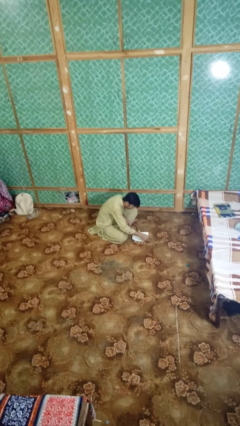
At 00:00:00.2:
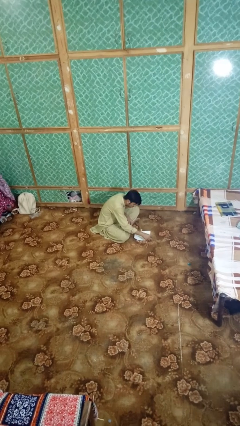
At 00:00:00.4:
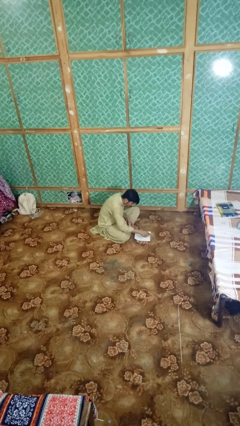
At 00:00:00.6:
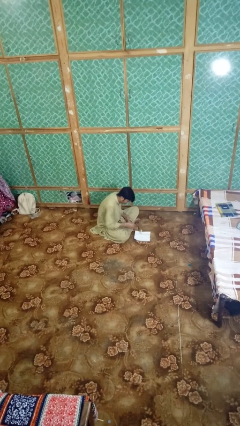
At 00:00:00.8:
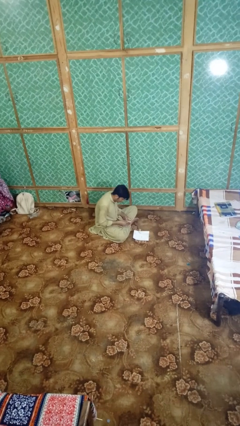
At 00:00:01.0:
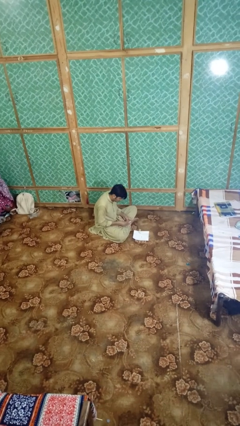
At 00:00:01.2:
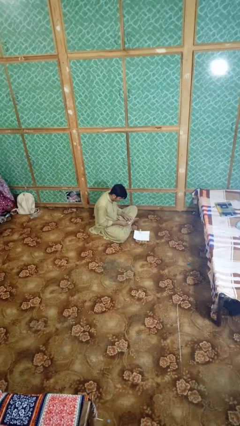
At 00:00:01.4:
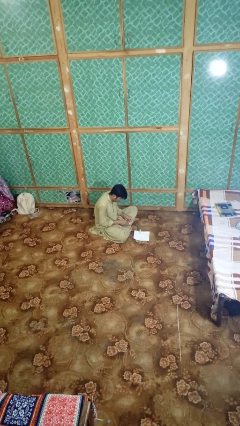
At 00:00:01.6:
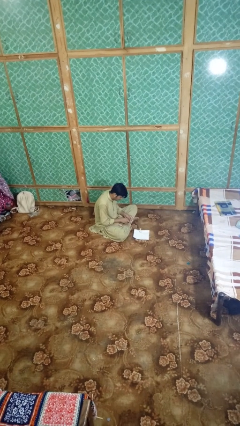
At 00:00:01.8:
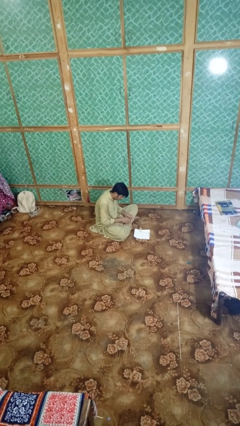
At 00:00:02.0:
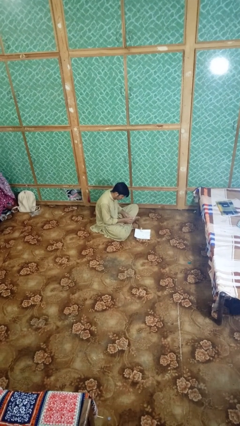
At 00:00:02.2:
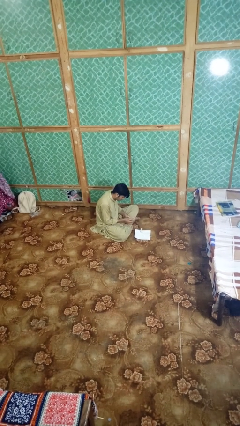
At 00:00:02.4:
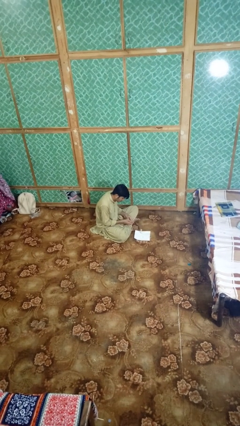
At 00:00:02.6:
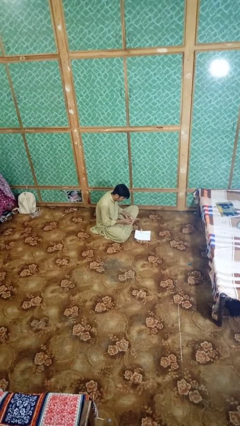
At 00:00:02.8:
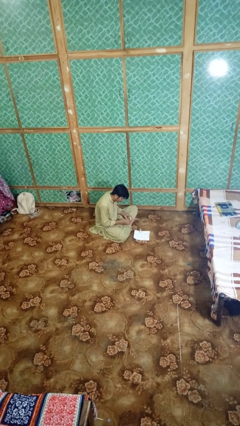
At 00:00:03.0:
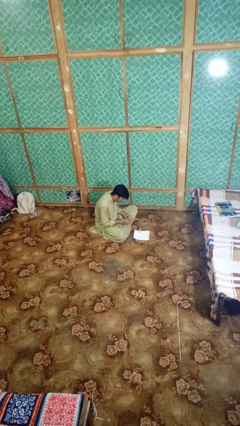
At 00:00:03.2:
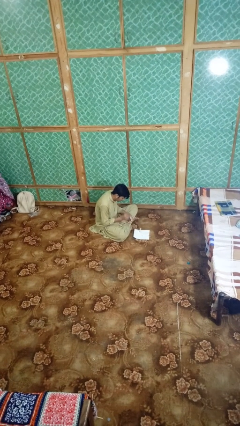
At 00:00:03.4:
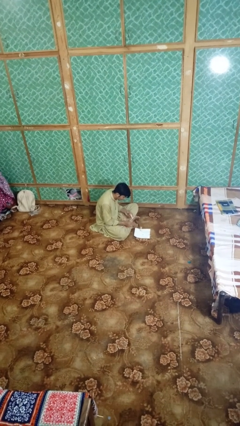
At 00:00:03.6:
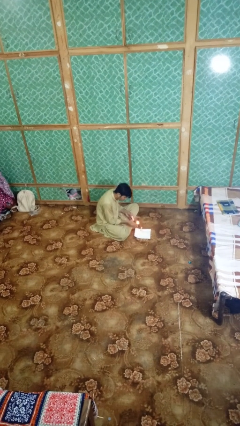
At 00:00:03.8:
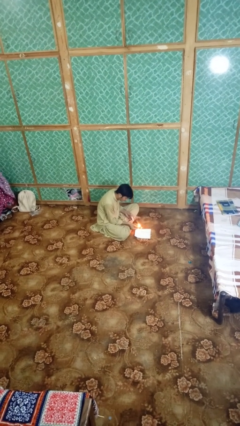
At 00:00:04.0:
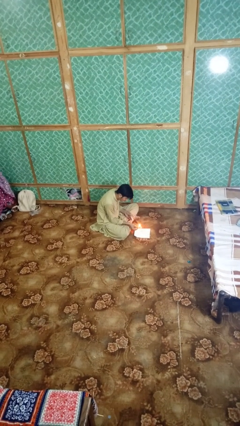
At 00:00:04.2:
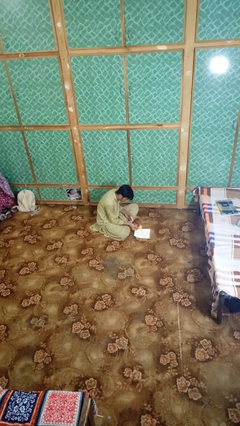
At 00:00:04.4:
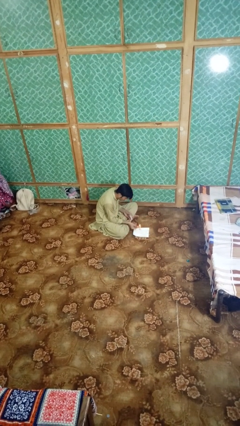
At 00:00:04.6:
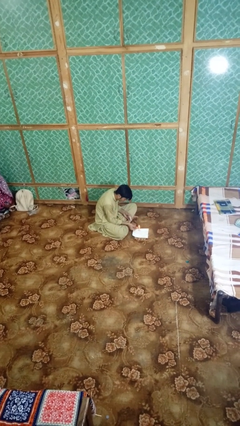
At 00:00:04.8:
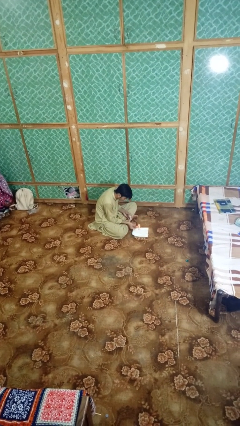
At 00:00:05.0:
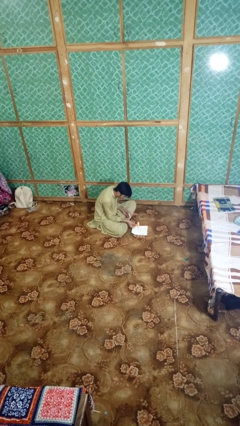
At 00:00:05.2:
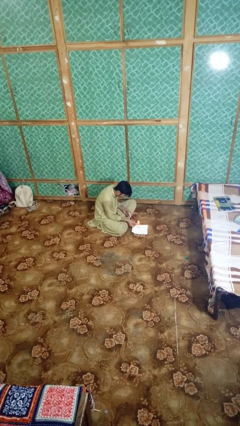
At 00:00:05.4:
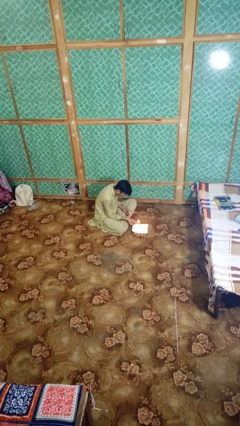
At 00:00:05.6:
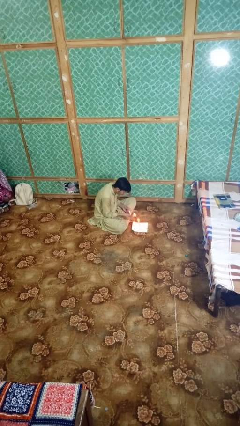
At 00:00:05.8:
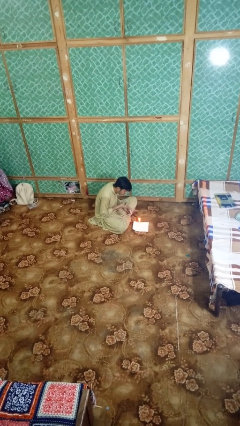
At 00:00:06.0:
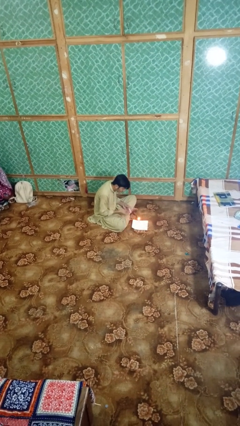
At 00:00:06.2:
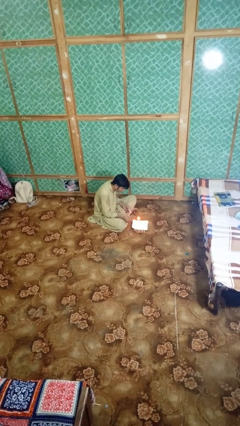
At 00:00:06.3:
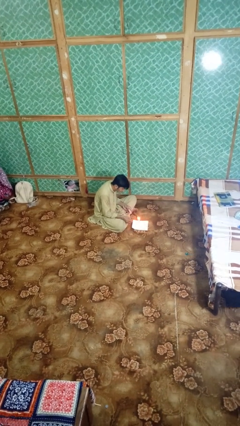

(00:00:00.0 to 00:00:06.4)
person lights candle

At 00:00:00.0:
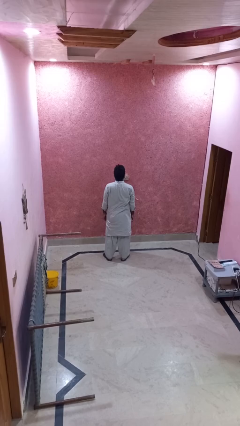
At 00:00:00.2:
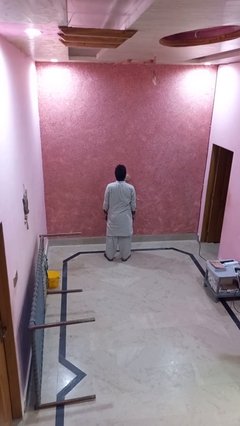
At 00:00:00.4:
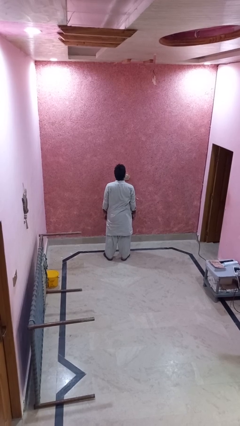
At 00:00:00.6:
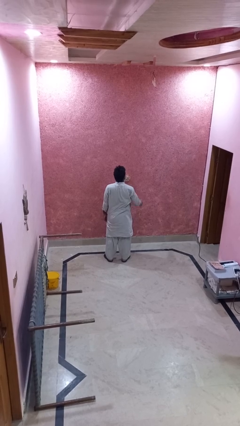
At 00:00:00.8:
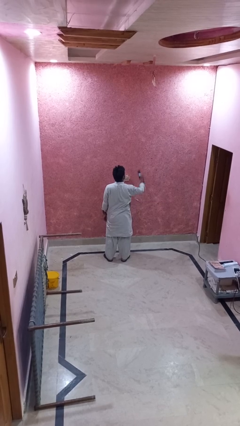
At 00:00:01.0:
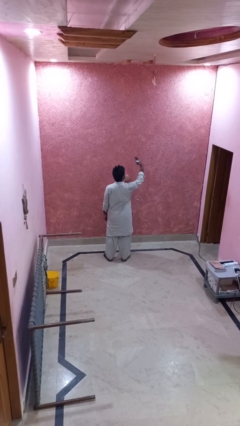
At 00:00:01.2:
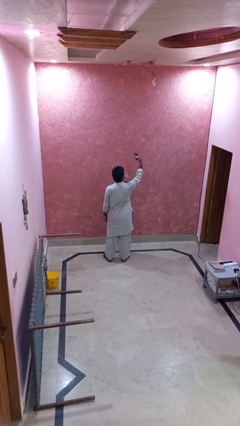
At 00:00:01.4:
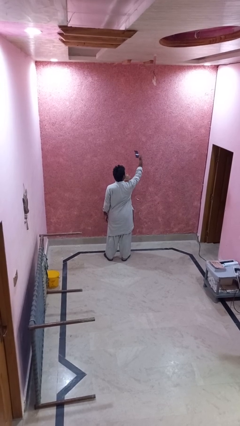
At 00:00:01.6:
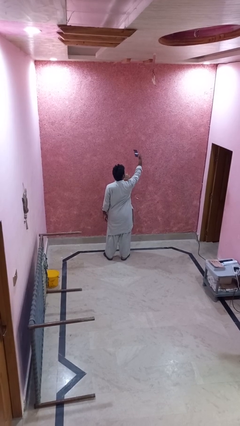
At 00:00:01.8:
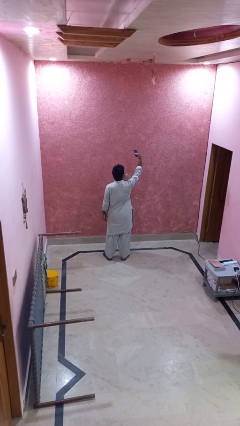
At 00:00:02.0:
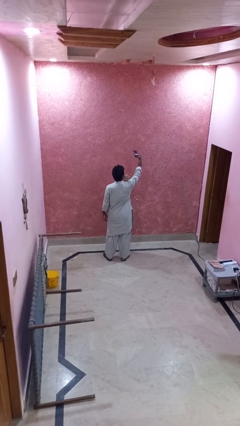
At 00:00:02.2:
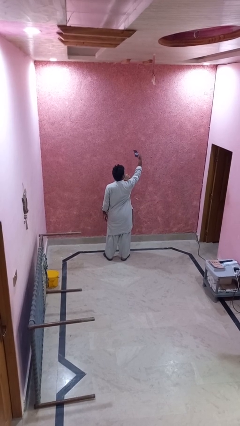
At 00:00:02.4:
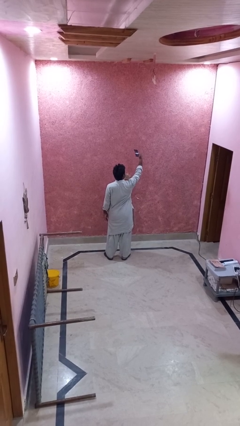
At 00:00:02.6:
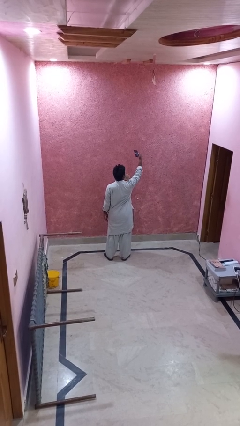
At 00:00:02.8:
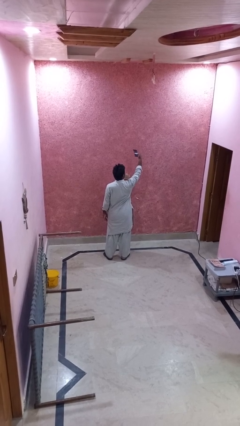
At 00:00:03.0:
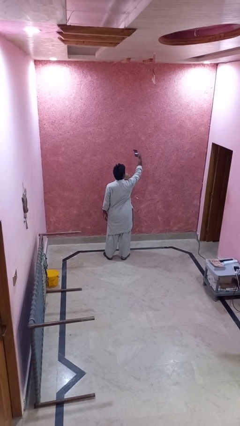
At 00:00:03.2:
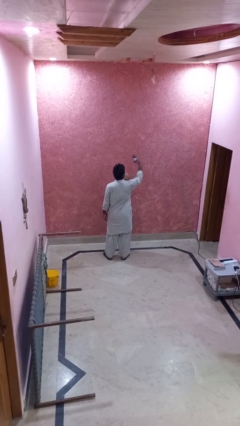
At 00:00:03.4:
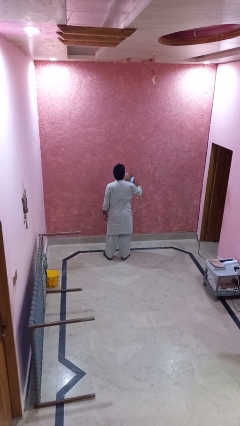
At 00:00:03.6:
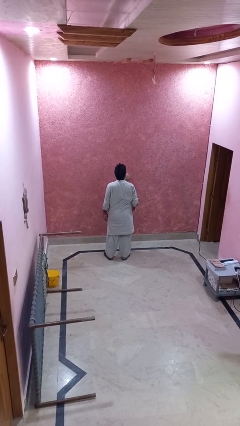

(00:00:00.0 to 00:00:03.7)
person takes selfie

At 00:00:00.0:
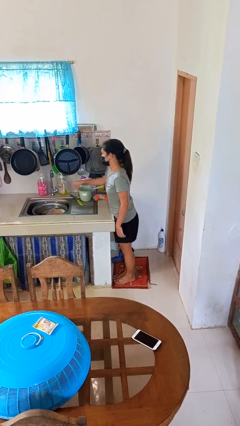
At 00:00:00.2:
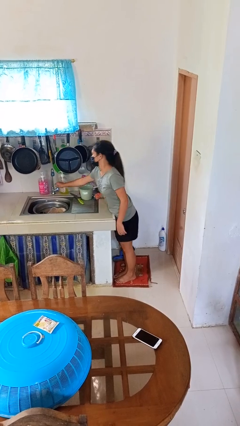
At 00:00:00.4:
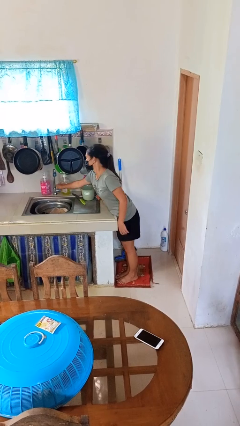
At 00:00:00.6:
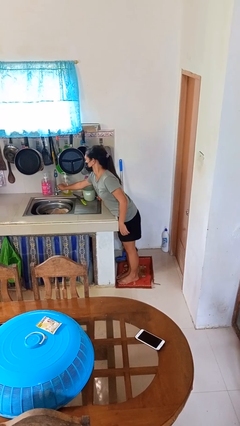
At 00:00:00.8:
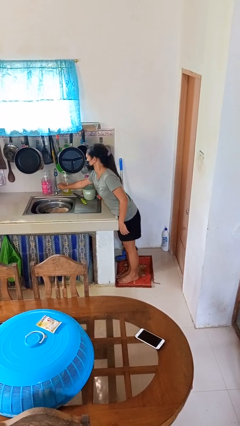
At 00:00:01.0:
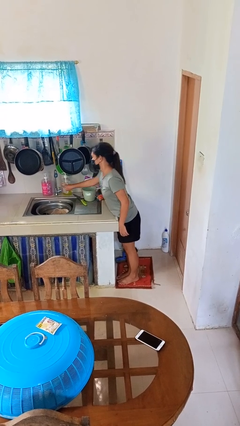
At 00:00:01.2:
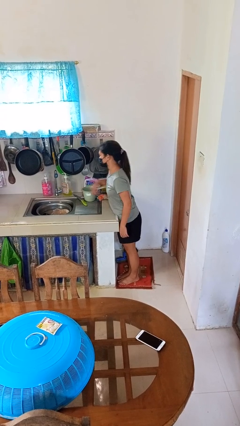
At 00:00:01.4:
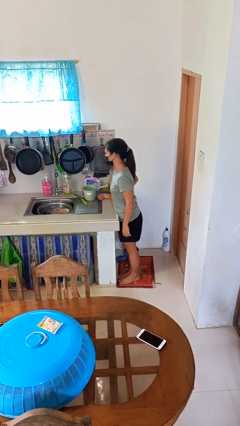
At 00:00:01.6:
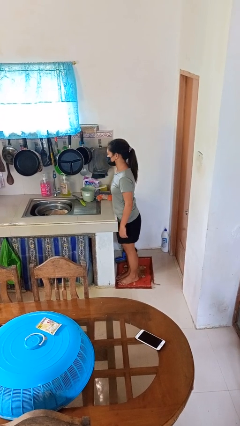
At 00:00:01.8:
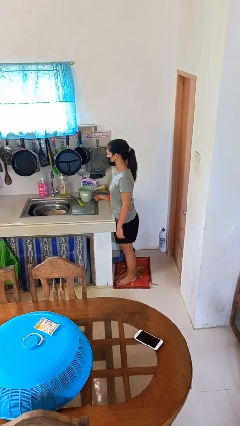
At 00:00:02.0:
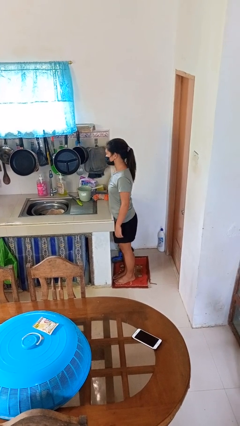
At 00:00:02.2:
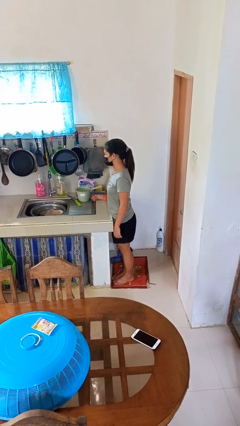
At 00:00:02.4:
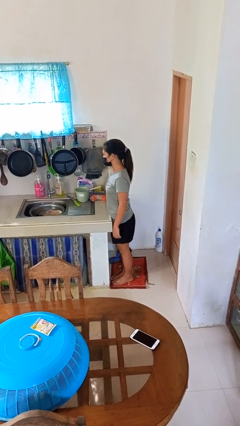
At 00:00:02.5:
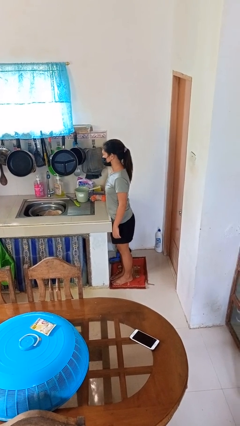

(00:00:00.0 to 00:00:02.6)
person turns on faucet

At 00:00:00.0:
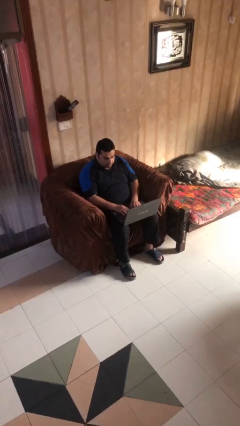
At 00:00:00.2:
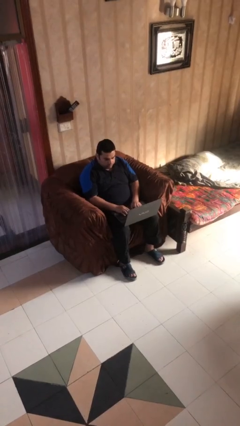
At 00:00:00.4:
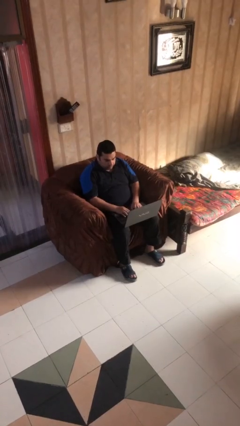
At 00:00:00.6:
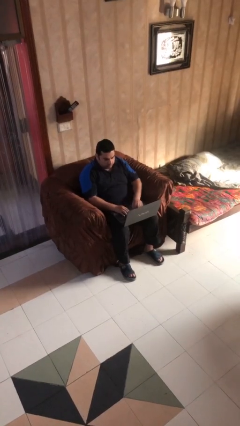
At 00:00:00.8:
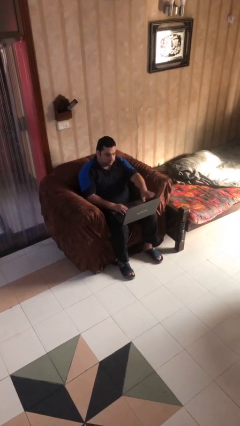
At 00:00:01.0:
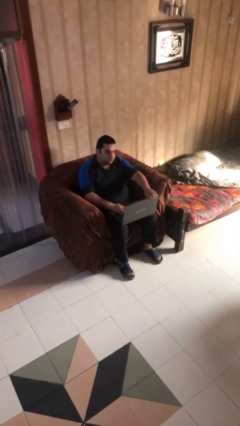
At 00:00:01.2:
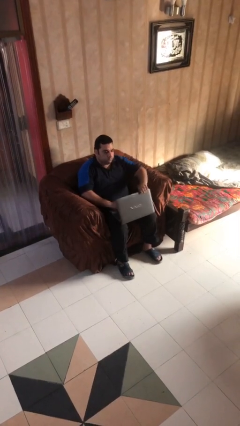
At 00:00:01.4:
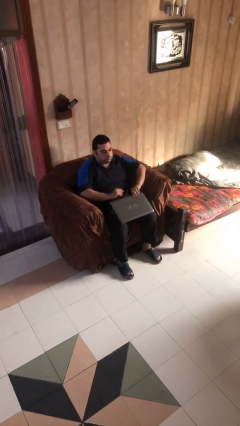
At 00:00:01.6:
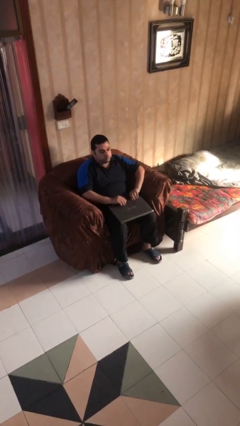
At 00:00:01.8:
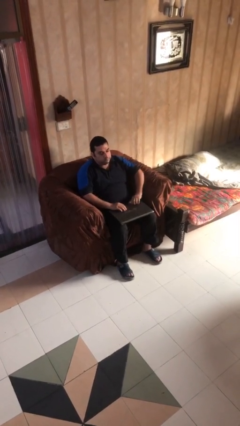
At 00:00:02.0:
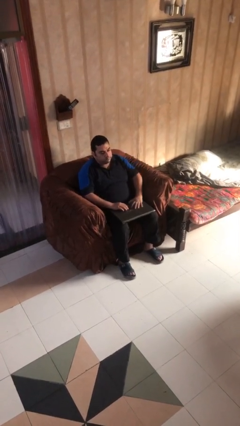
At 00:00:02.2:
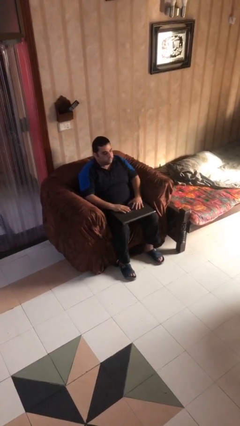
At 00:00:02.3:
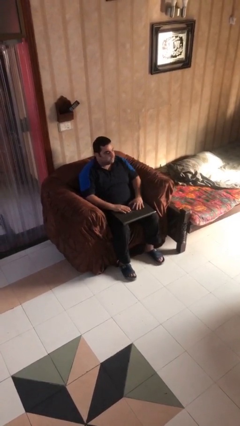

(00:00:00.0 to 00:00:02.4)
person closes laptop

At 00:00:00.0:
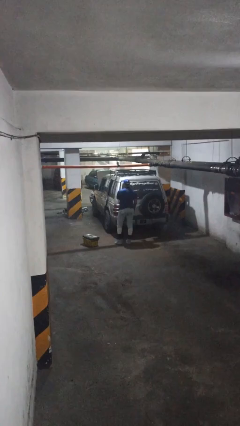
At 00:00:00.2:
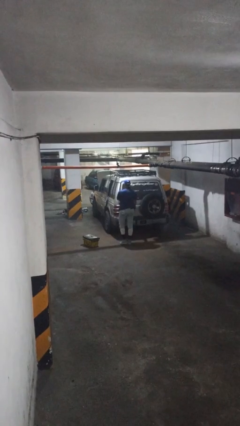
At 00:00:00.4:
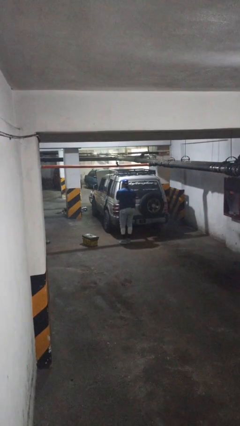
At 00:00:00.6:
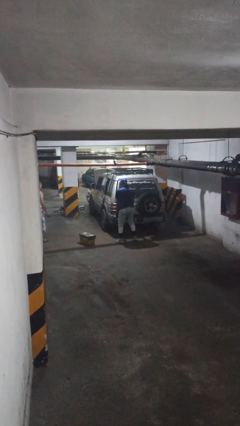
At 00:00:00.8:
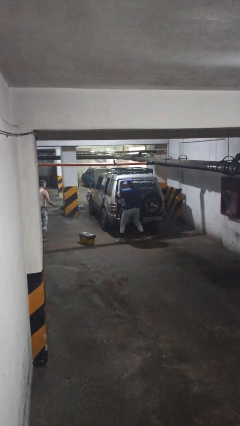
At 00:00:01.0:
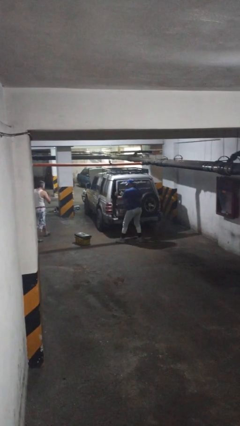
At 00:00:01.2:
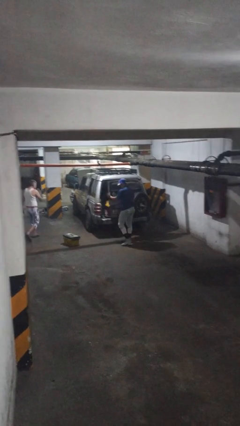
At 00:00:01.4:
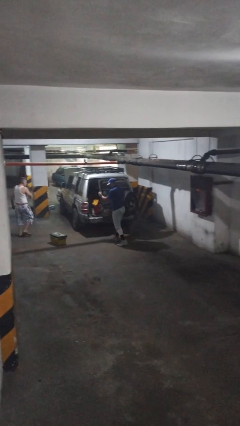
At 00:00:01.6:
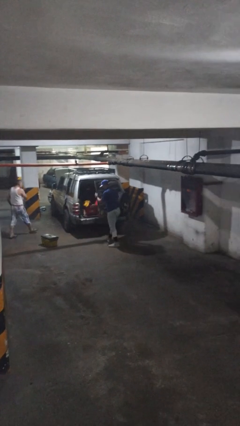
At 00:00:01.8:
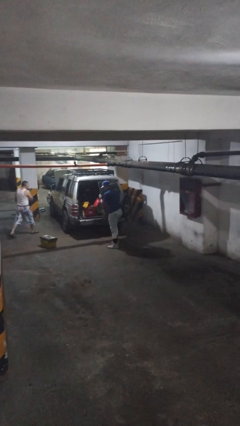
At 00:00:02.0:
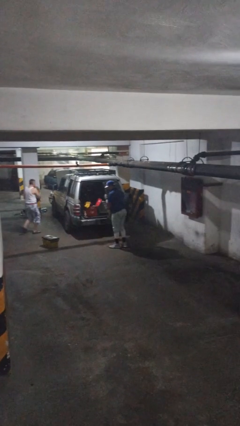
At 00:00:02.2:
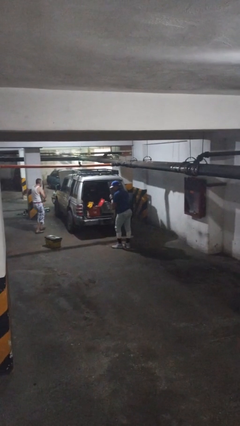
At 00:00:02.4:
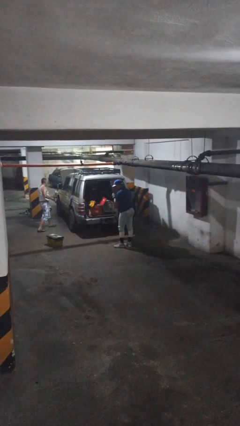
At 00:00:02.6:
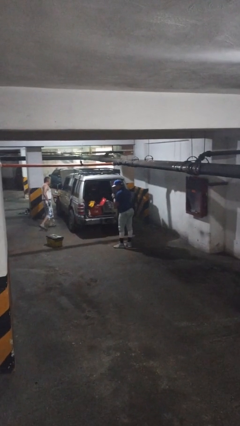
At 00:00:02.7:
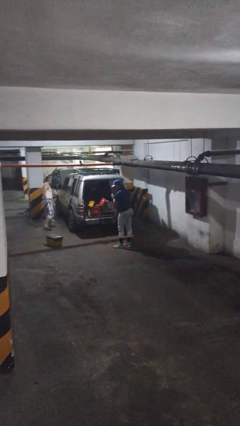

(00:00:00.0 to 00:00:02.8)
person opens car trunk
